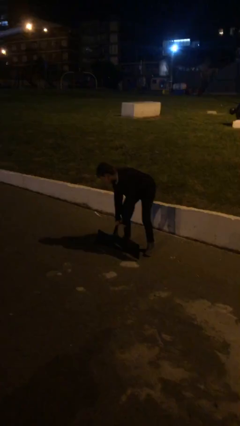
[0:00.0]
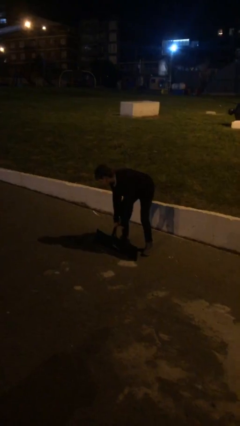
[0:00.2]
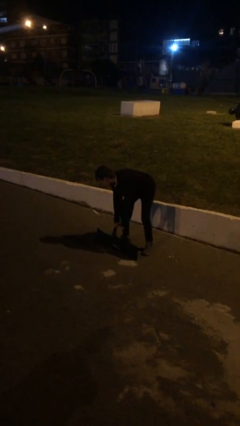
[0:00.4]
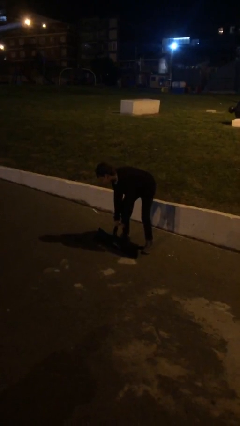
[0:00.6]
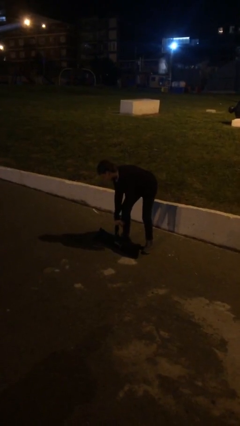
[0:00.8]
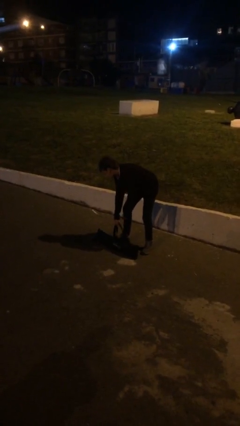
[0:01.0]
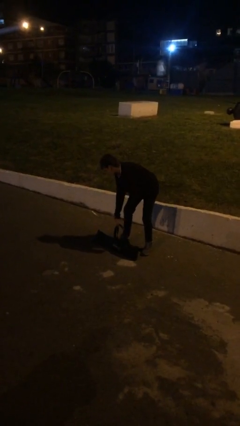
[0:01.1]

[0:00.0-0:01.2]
person puts down object on floor

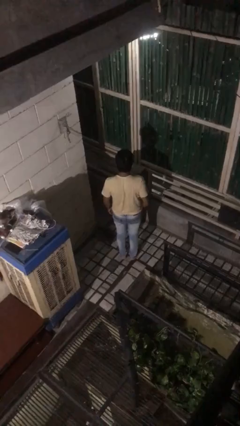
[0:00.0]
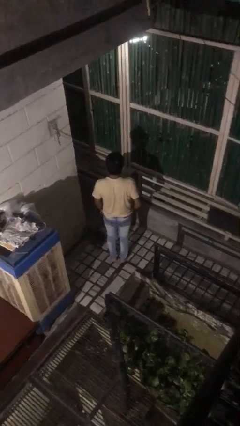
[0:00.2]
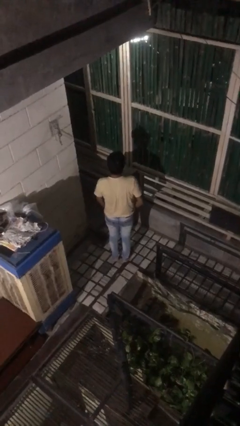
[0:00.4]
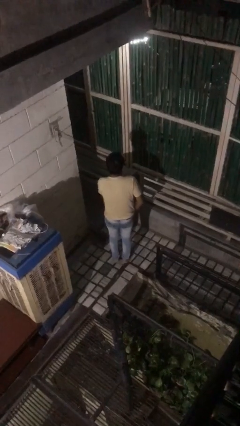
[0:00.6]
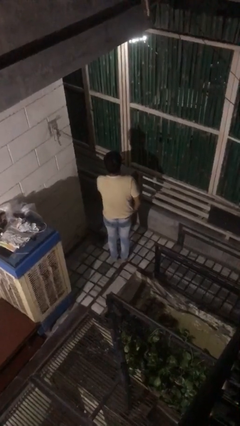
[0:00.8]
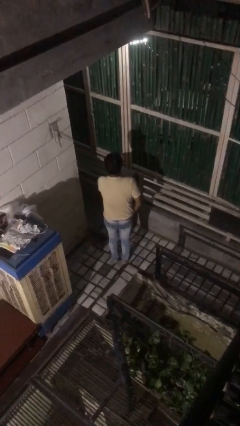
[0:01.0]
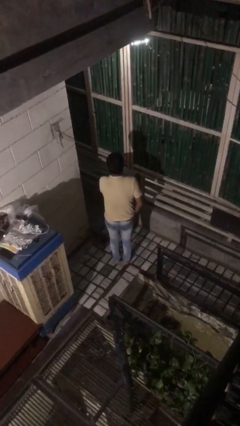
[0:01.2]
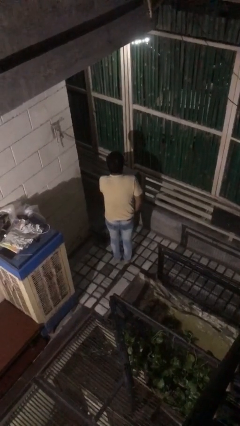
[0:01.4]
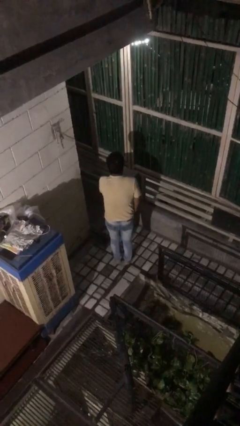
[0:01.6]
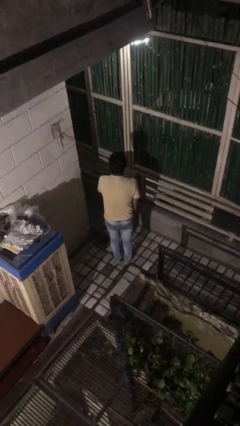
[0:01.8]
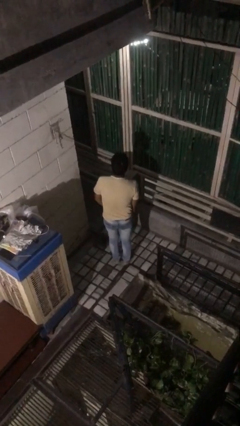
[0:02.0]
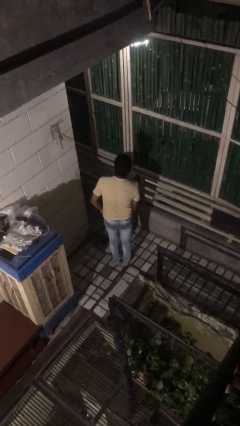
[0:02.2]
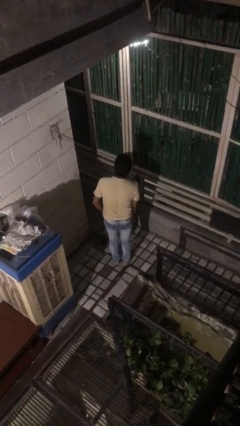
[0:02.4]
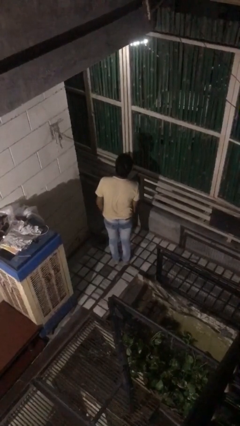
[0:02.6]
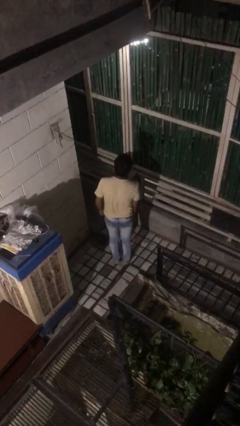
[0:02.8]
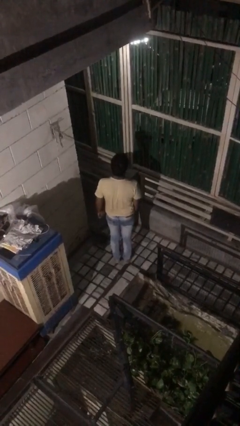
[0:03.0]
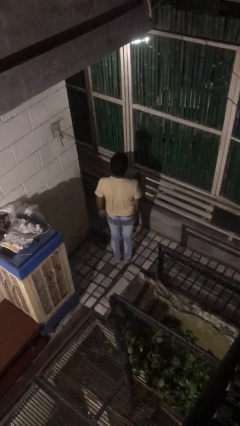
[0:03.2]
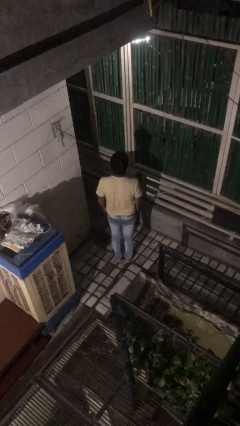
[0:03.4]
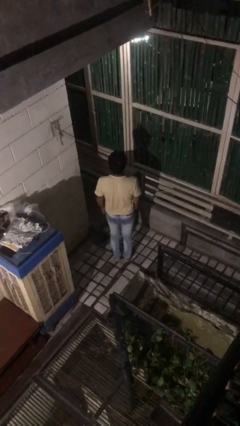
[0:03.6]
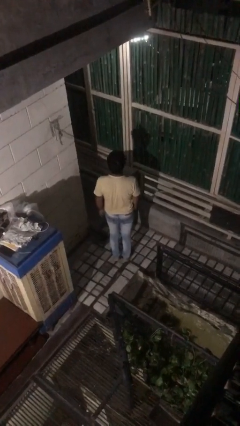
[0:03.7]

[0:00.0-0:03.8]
person puts hands in back pockets

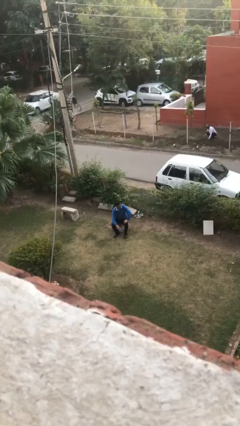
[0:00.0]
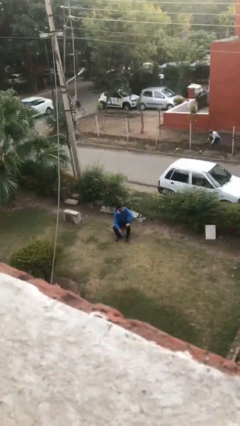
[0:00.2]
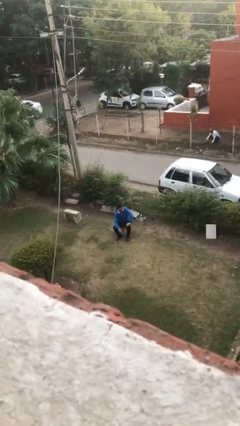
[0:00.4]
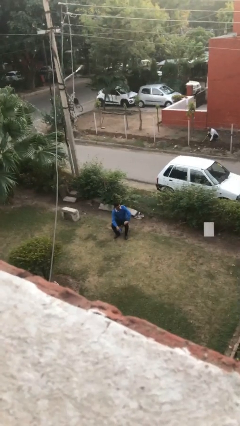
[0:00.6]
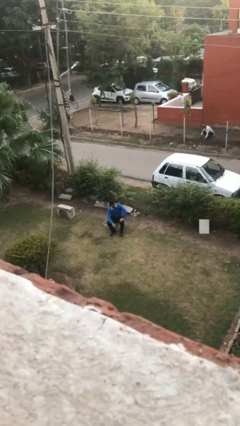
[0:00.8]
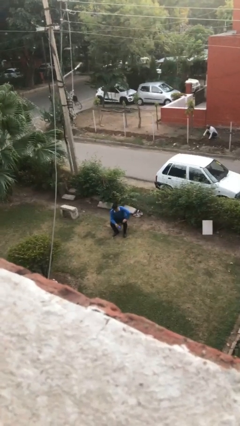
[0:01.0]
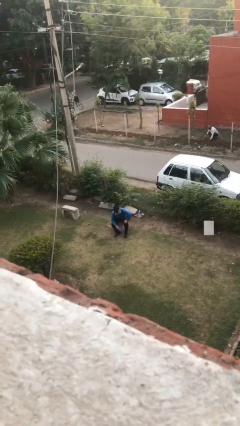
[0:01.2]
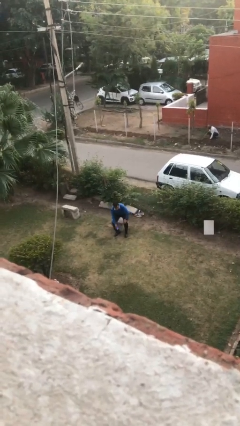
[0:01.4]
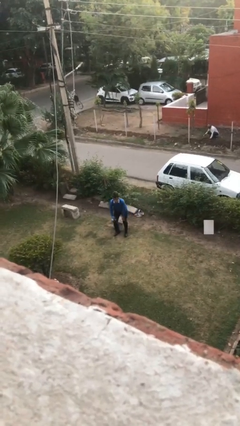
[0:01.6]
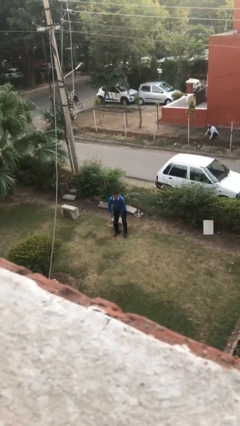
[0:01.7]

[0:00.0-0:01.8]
person stands up

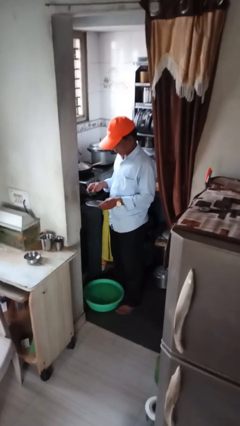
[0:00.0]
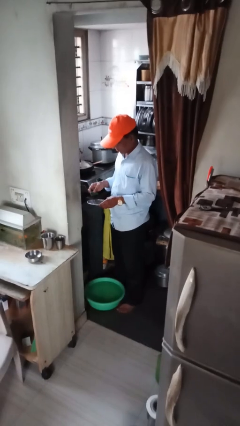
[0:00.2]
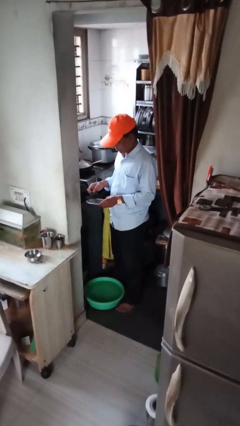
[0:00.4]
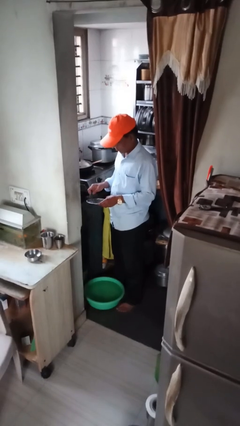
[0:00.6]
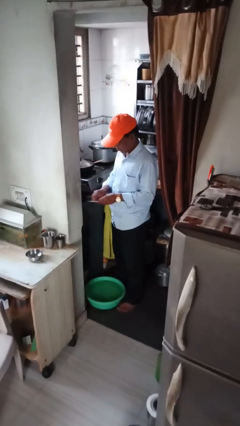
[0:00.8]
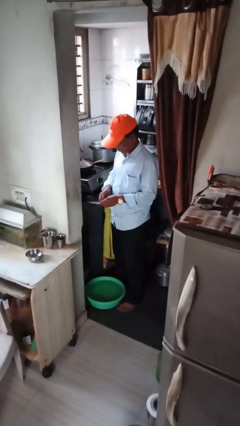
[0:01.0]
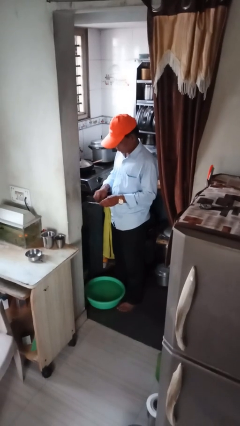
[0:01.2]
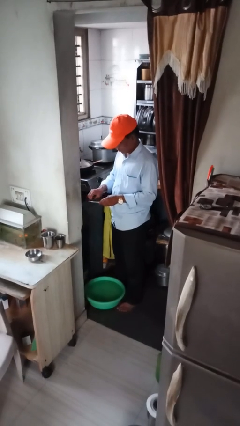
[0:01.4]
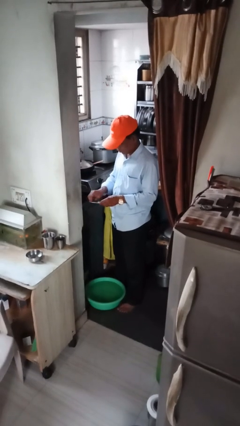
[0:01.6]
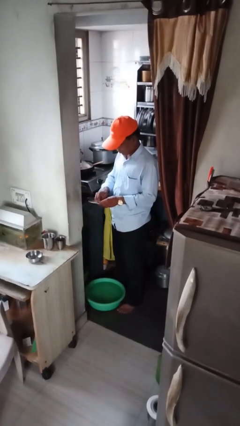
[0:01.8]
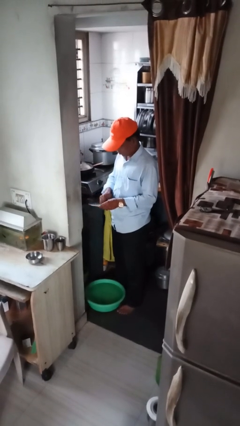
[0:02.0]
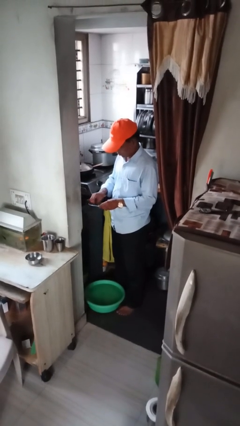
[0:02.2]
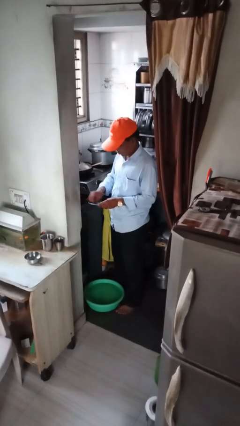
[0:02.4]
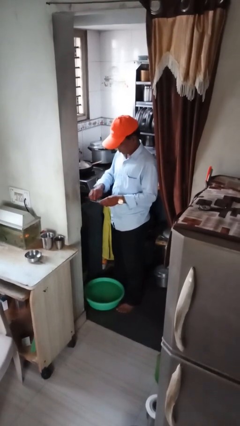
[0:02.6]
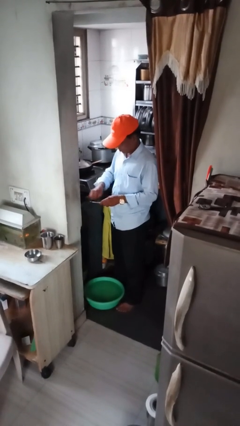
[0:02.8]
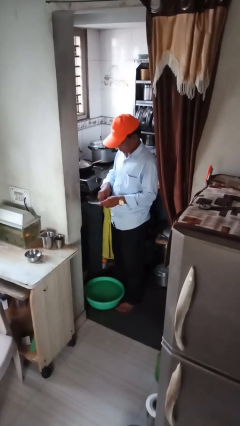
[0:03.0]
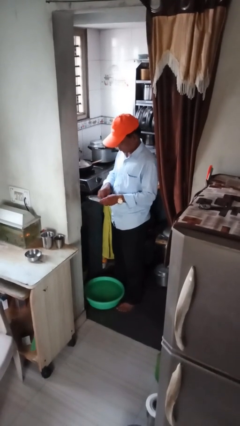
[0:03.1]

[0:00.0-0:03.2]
person washes dish

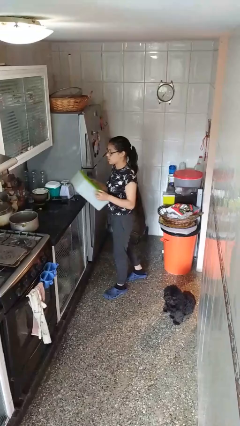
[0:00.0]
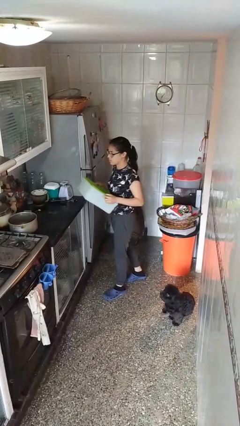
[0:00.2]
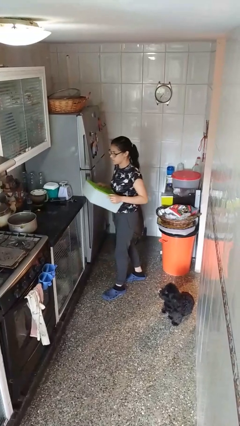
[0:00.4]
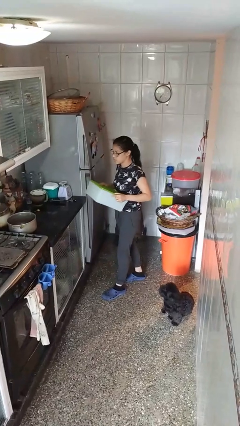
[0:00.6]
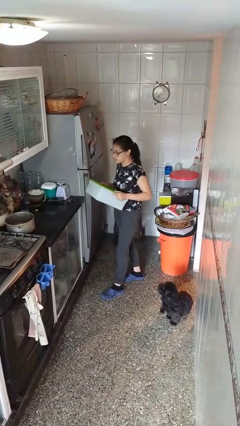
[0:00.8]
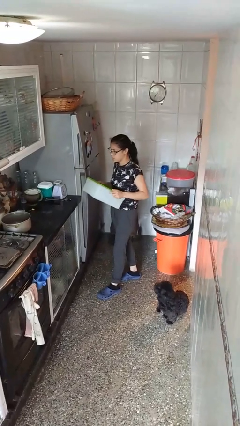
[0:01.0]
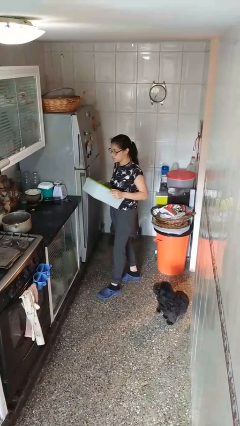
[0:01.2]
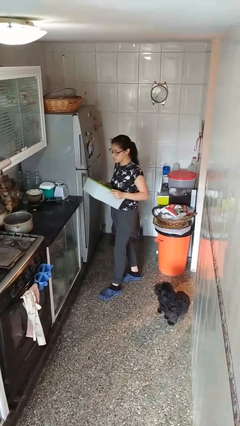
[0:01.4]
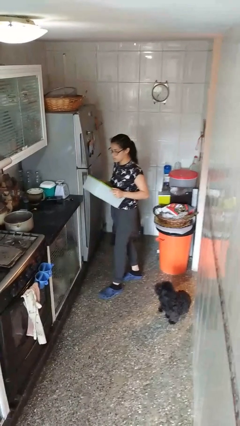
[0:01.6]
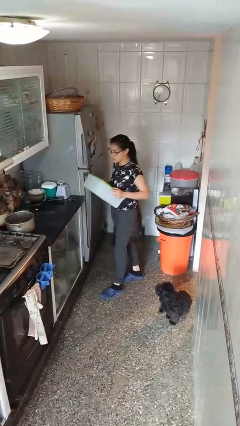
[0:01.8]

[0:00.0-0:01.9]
person picks up object from countertop

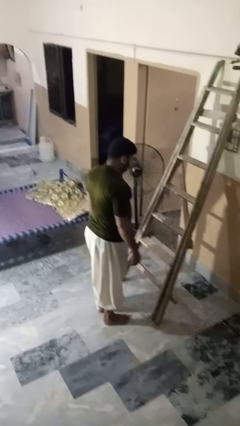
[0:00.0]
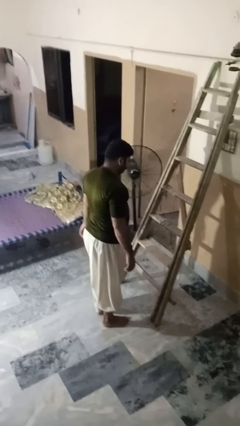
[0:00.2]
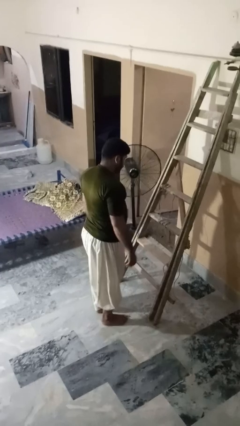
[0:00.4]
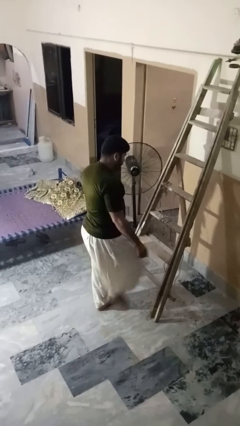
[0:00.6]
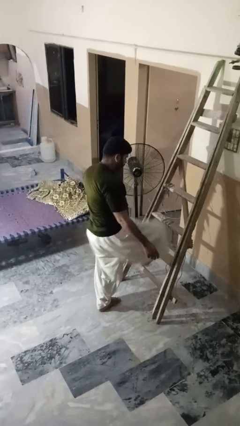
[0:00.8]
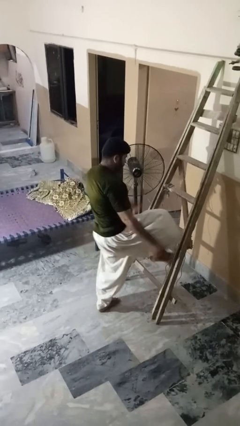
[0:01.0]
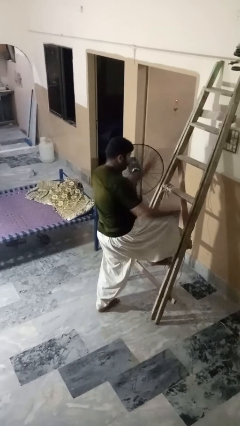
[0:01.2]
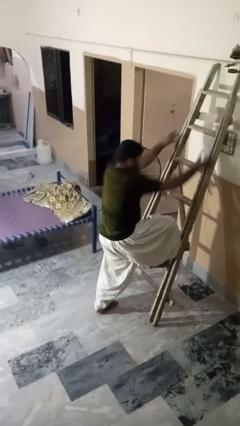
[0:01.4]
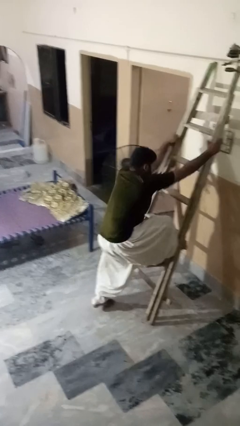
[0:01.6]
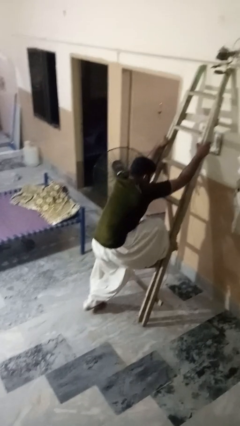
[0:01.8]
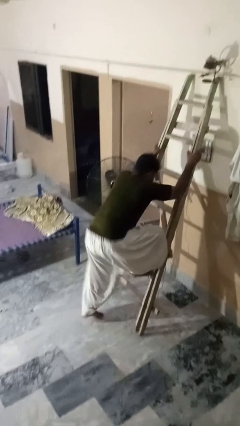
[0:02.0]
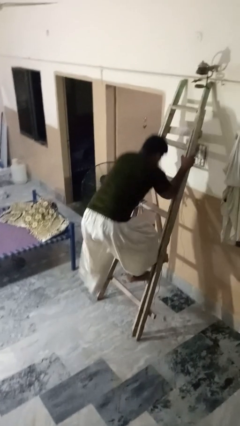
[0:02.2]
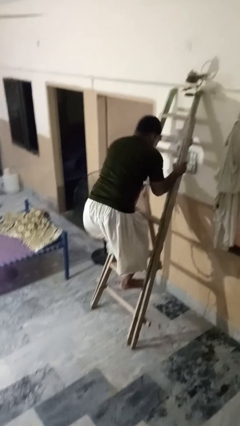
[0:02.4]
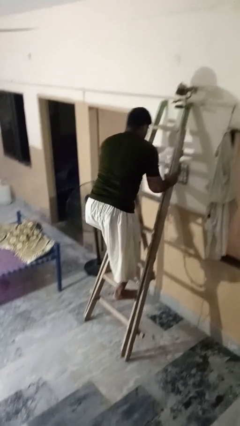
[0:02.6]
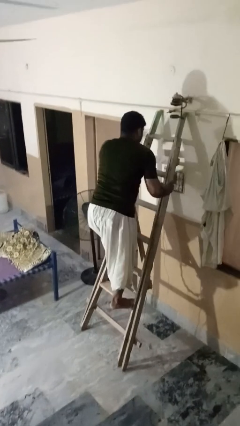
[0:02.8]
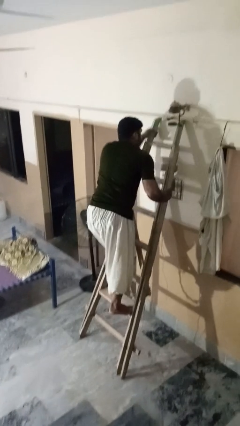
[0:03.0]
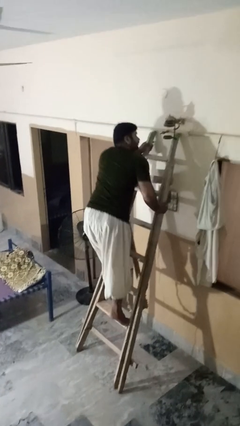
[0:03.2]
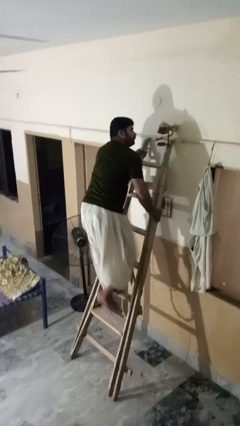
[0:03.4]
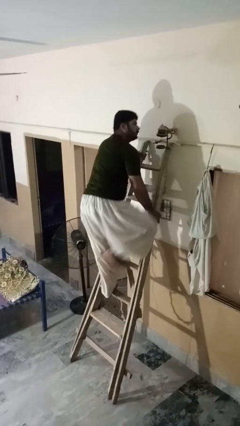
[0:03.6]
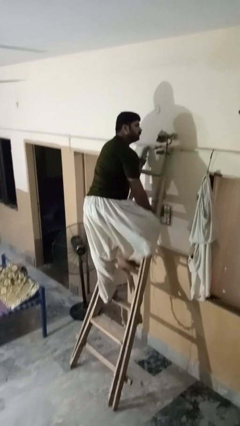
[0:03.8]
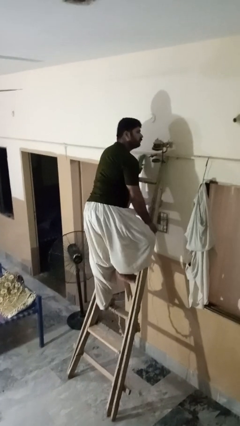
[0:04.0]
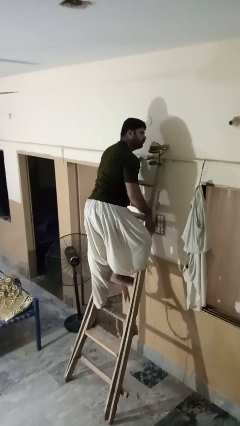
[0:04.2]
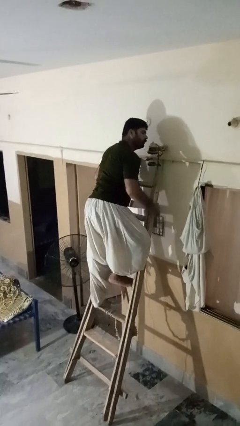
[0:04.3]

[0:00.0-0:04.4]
person climbs up ladder

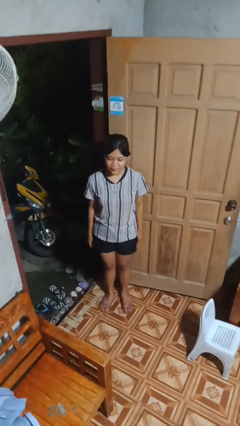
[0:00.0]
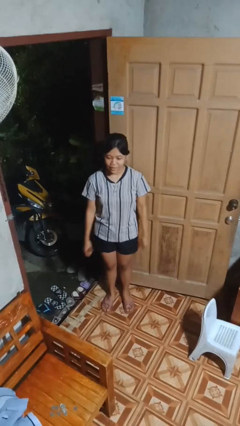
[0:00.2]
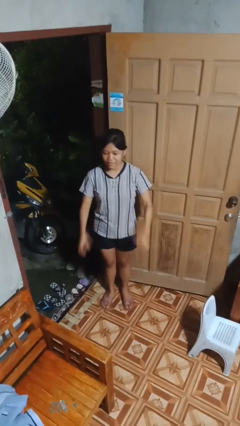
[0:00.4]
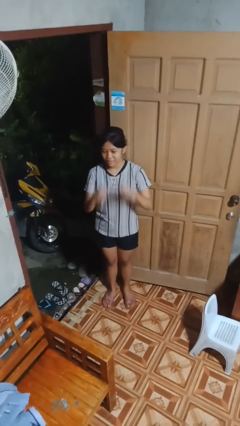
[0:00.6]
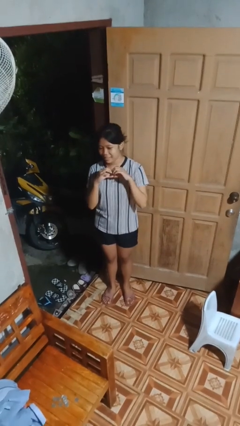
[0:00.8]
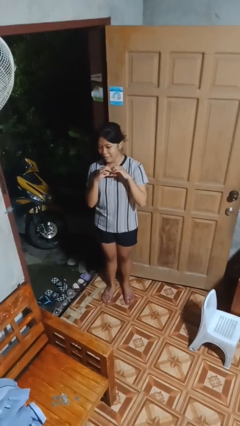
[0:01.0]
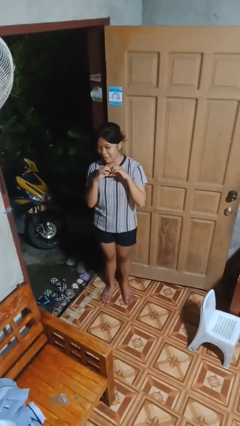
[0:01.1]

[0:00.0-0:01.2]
person gestures heart
